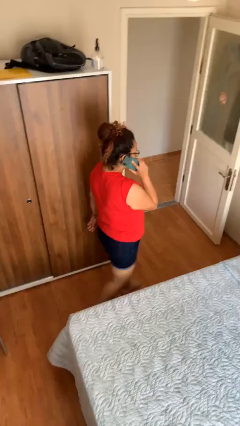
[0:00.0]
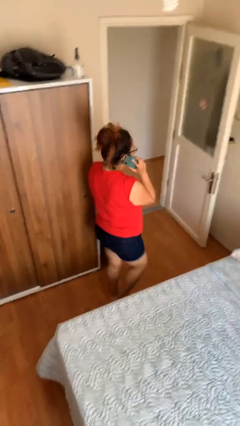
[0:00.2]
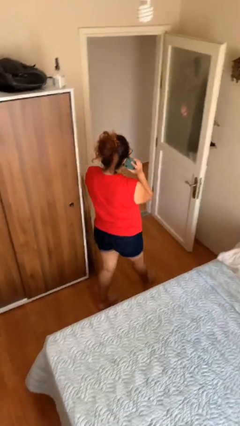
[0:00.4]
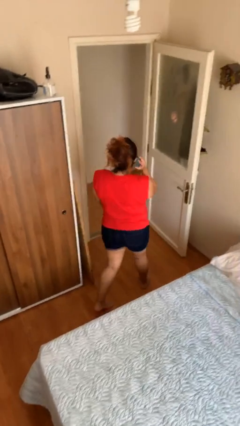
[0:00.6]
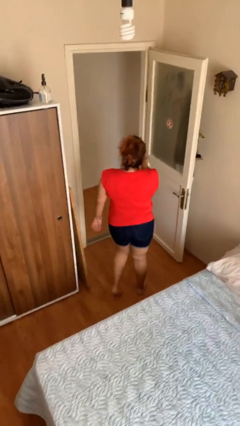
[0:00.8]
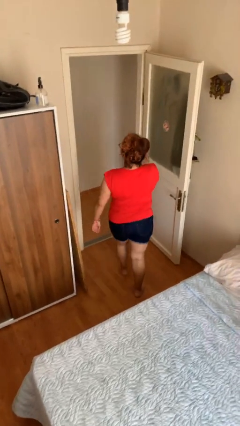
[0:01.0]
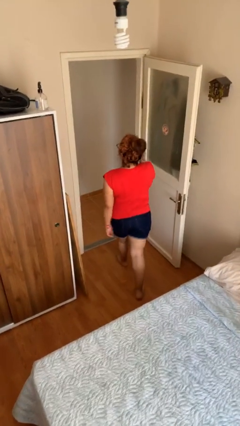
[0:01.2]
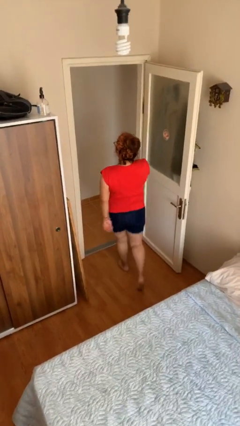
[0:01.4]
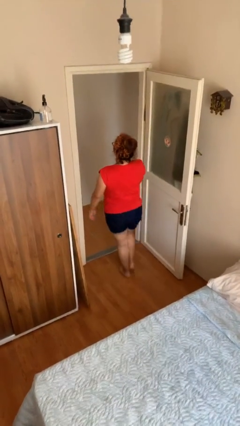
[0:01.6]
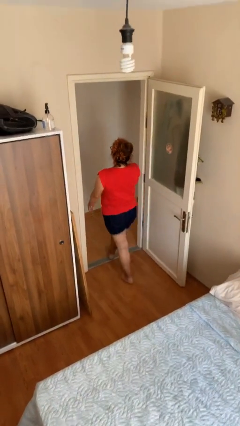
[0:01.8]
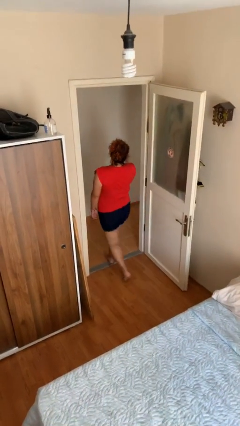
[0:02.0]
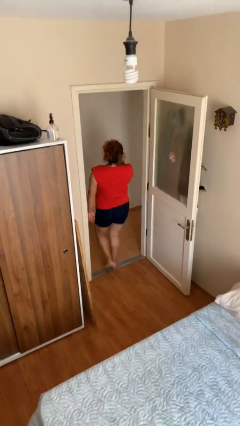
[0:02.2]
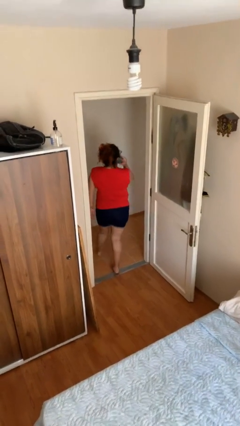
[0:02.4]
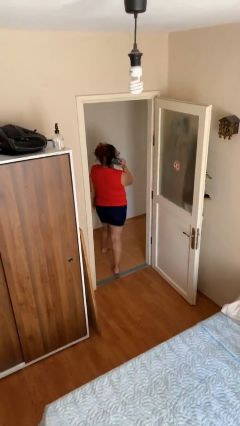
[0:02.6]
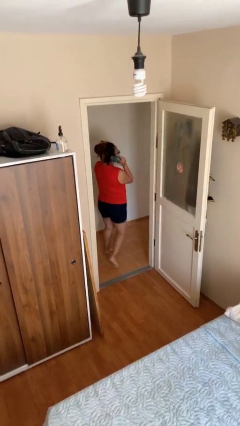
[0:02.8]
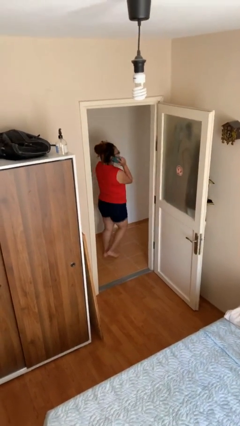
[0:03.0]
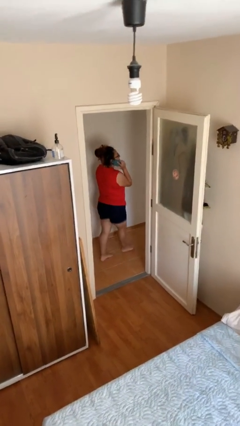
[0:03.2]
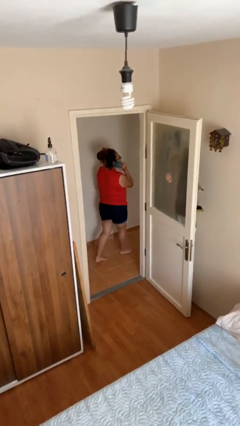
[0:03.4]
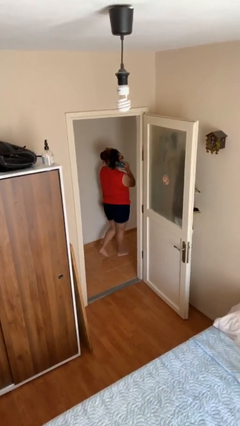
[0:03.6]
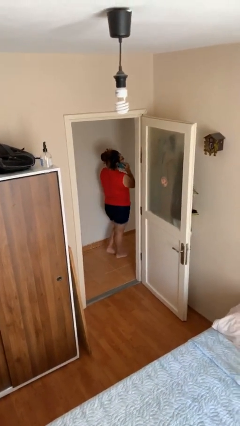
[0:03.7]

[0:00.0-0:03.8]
person exits scene through structure

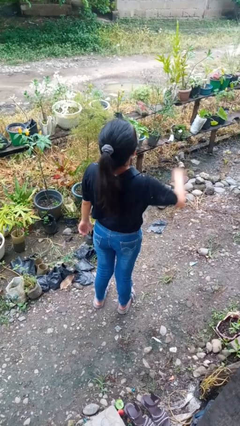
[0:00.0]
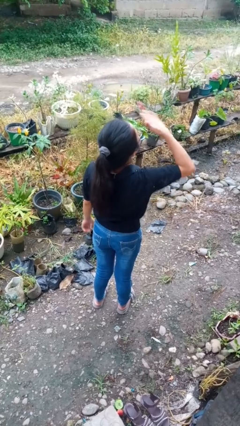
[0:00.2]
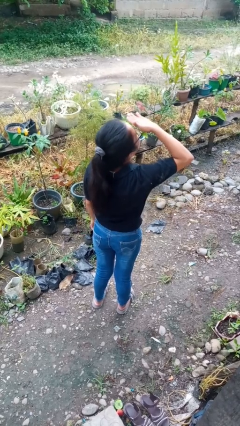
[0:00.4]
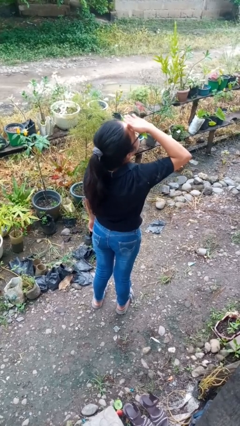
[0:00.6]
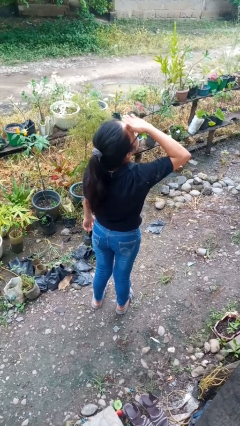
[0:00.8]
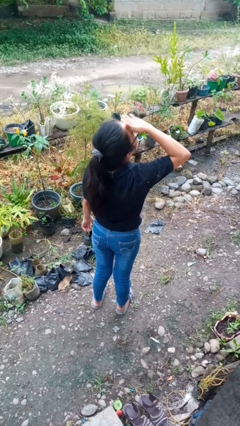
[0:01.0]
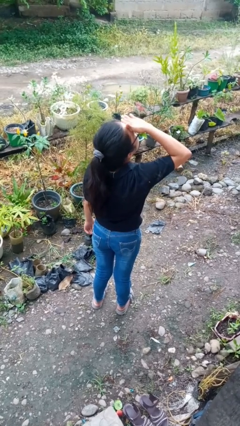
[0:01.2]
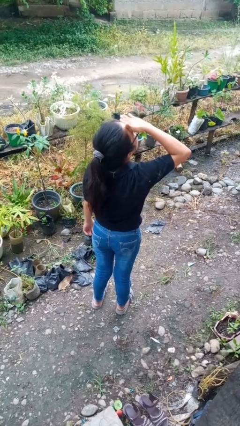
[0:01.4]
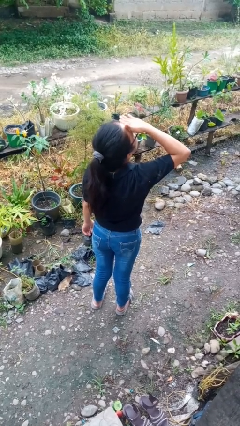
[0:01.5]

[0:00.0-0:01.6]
person shades eyes

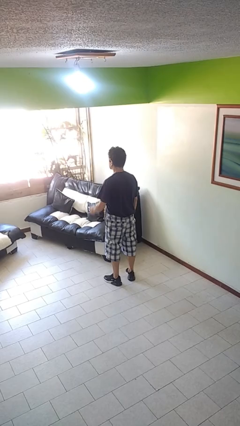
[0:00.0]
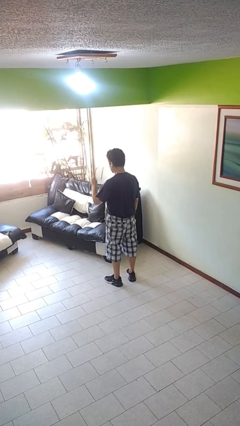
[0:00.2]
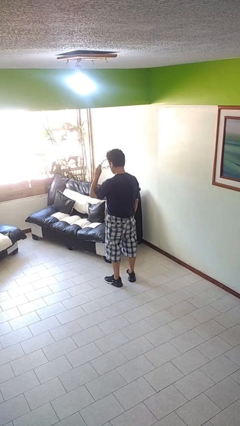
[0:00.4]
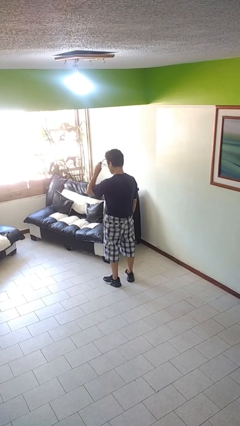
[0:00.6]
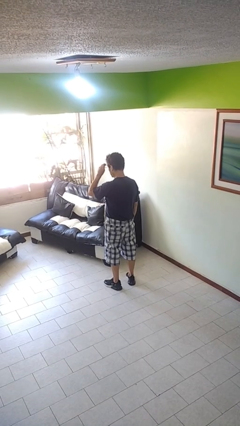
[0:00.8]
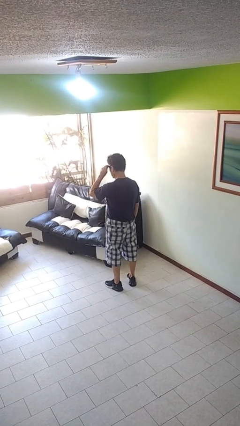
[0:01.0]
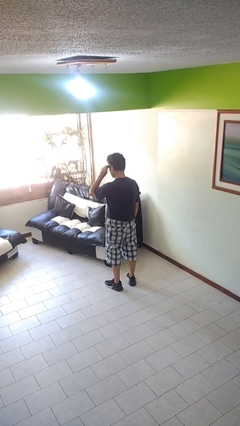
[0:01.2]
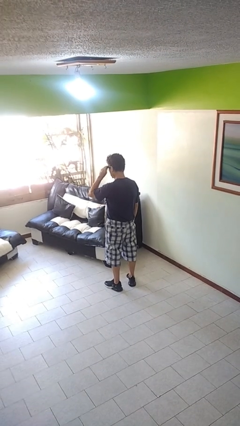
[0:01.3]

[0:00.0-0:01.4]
person puts on glasses

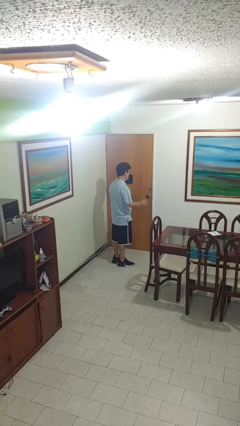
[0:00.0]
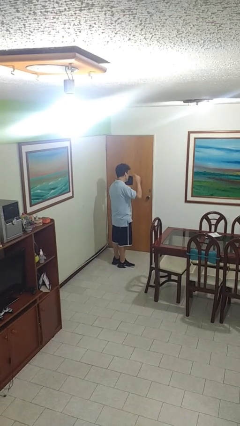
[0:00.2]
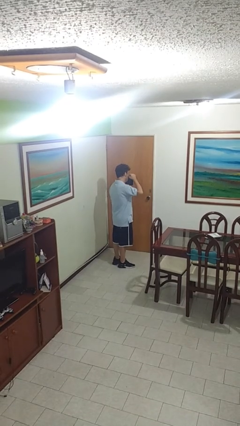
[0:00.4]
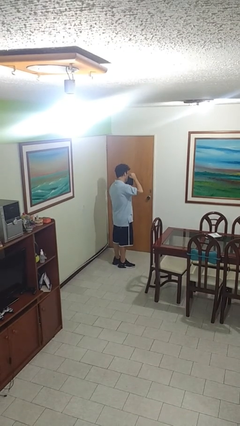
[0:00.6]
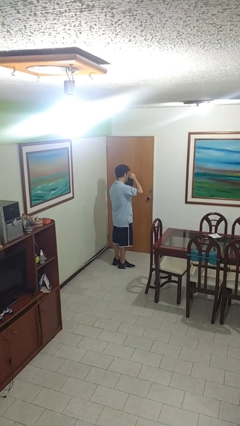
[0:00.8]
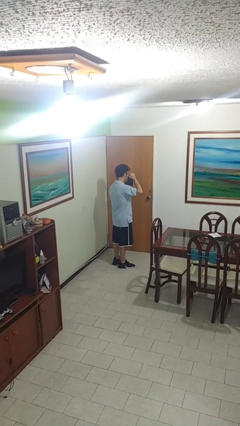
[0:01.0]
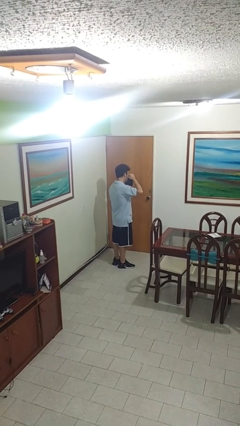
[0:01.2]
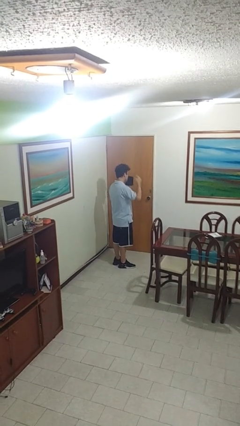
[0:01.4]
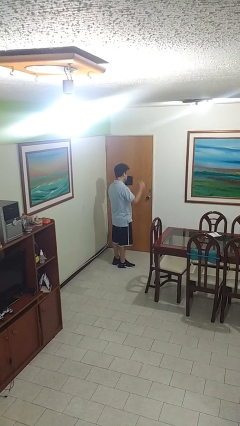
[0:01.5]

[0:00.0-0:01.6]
person gestures listen closely

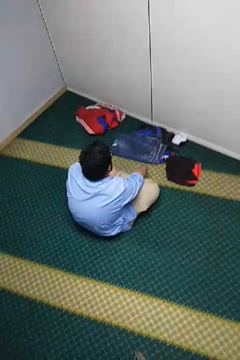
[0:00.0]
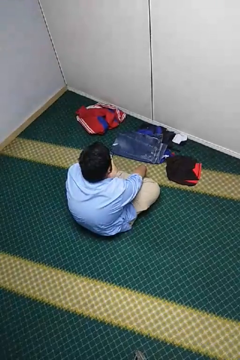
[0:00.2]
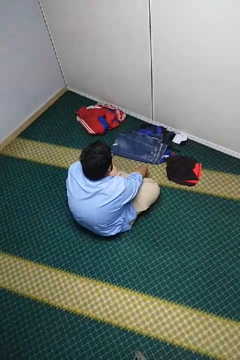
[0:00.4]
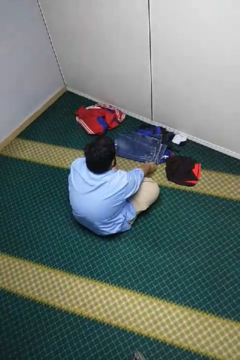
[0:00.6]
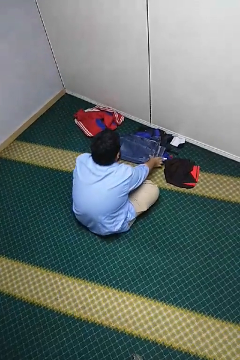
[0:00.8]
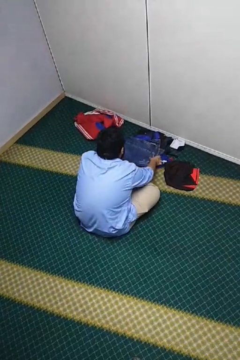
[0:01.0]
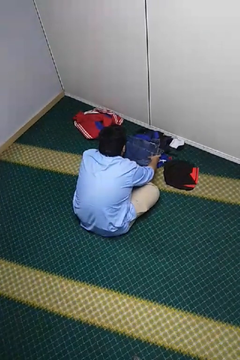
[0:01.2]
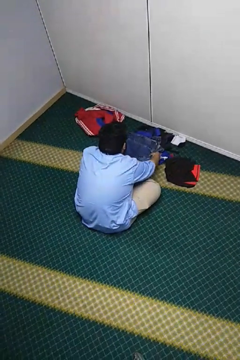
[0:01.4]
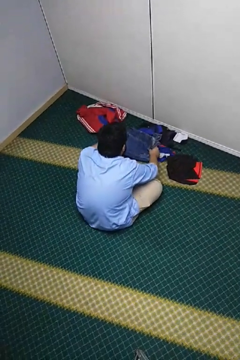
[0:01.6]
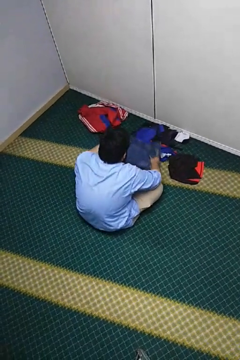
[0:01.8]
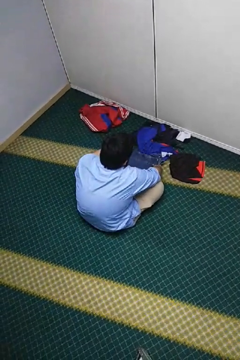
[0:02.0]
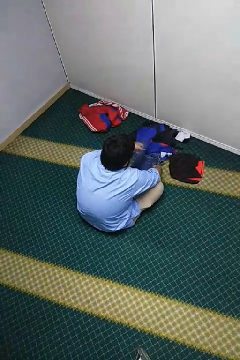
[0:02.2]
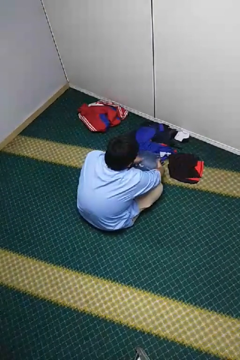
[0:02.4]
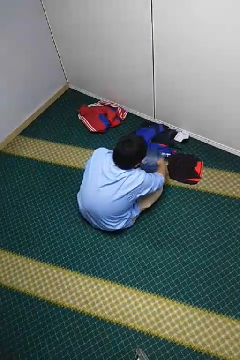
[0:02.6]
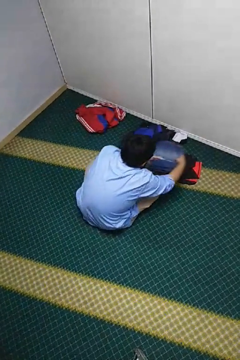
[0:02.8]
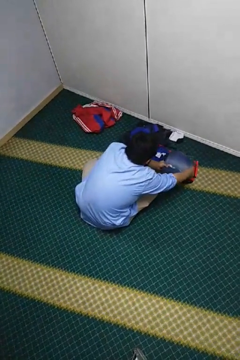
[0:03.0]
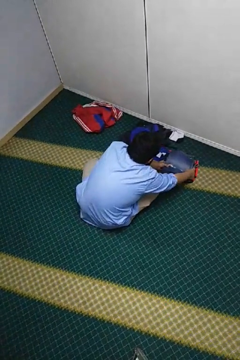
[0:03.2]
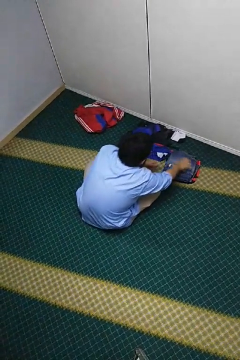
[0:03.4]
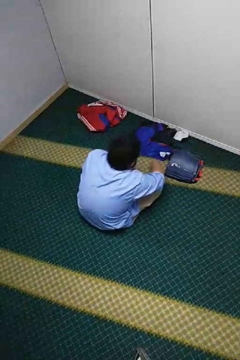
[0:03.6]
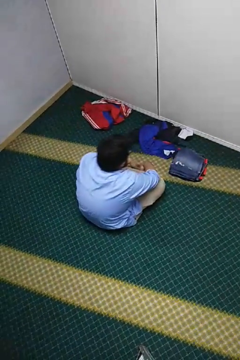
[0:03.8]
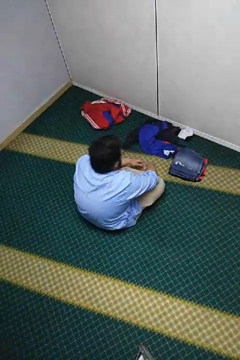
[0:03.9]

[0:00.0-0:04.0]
person folds pants

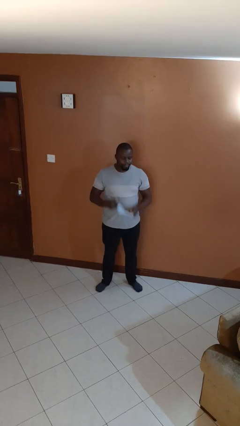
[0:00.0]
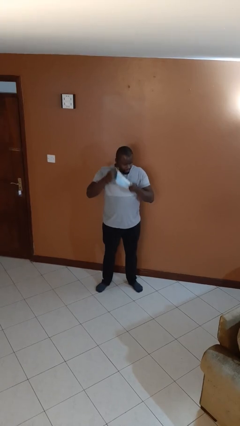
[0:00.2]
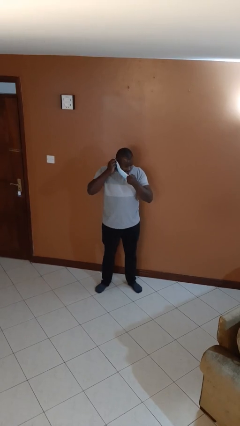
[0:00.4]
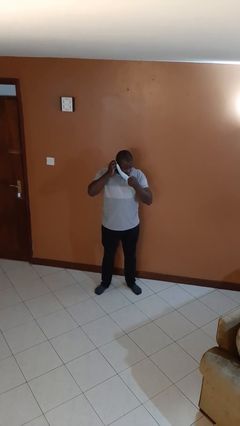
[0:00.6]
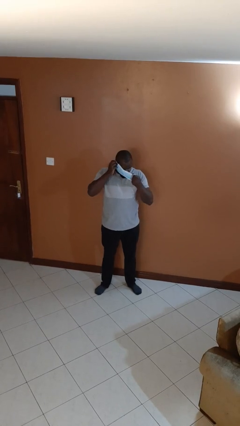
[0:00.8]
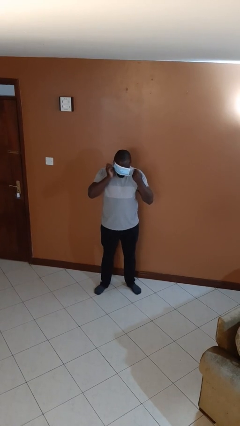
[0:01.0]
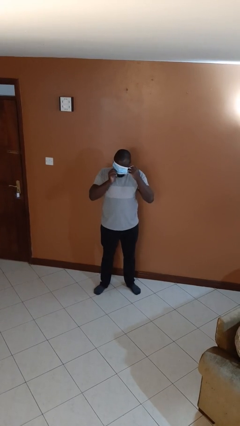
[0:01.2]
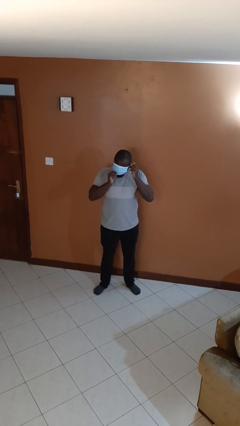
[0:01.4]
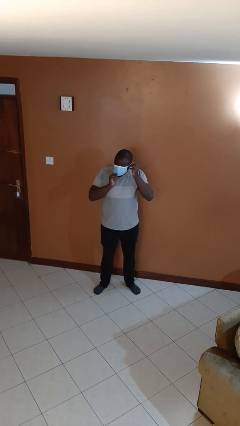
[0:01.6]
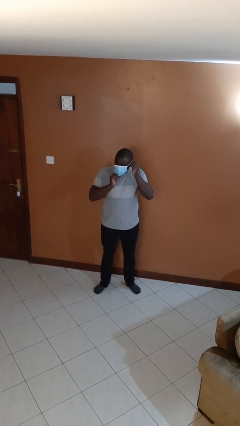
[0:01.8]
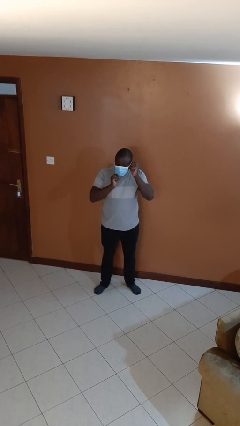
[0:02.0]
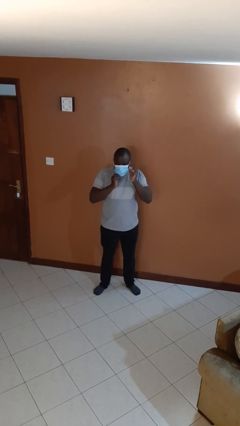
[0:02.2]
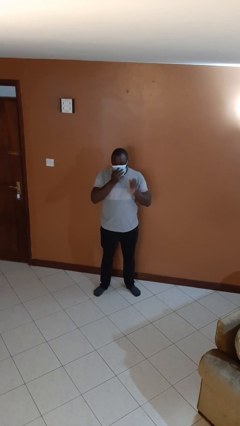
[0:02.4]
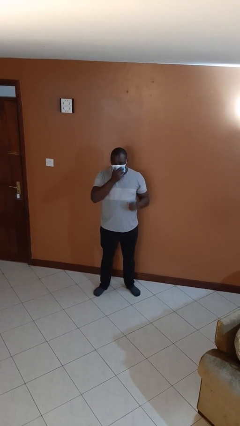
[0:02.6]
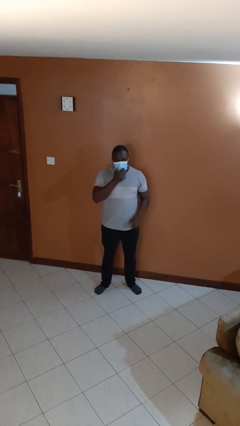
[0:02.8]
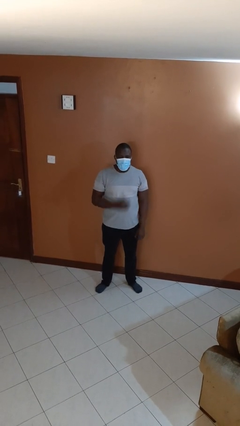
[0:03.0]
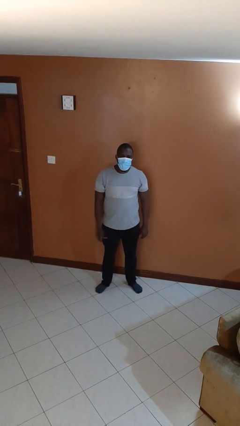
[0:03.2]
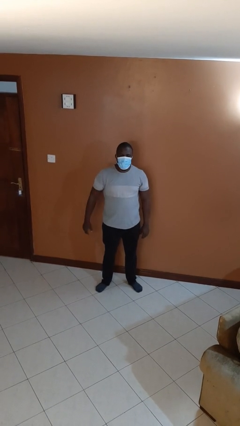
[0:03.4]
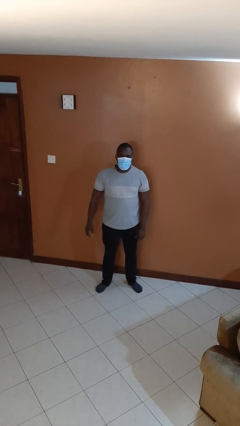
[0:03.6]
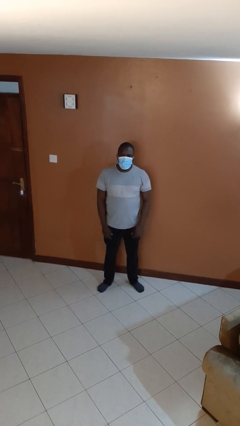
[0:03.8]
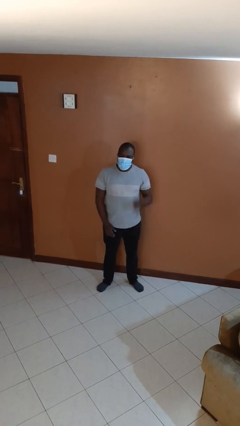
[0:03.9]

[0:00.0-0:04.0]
person puts on facemask

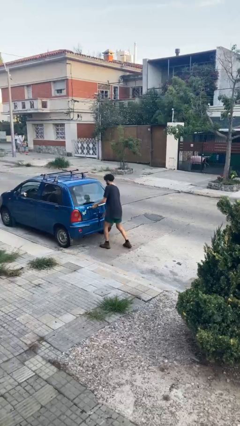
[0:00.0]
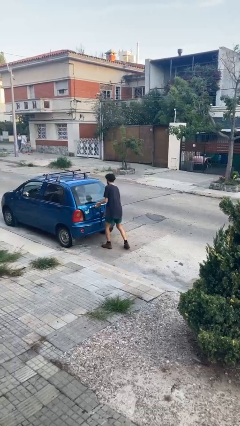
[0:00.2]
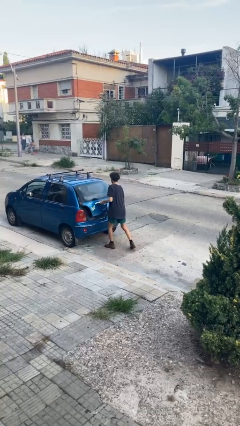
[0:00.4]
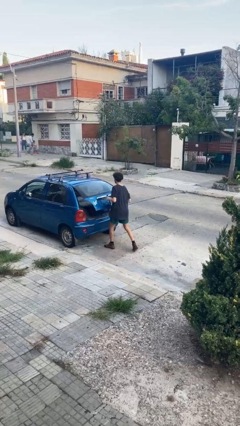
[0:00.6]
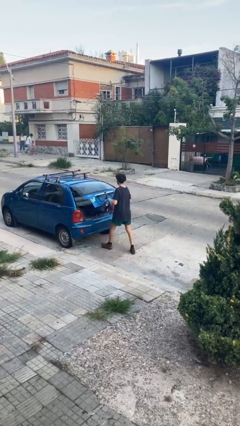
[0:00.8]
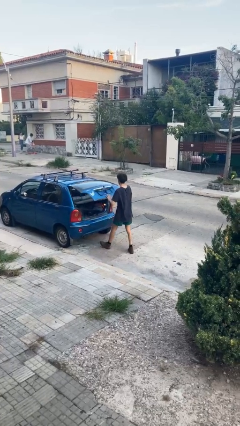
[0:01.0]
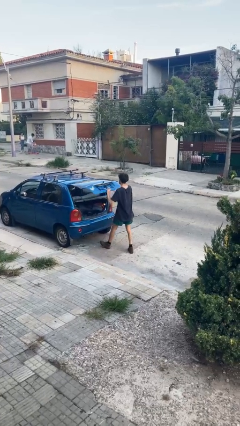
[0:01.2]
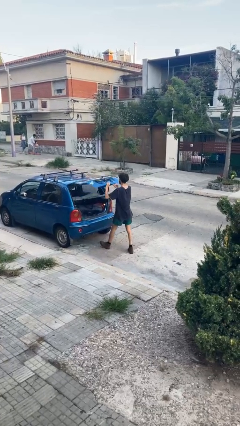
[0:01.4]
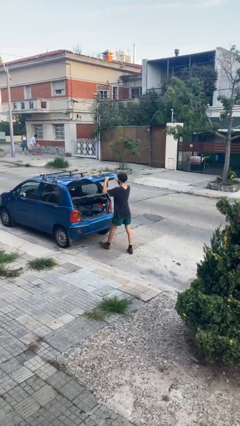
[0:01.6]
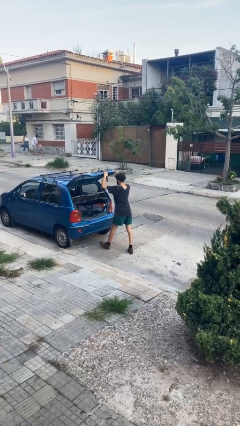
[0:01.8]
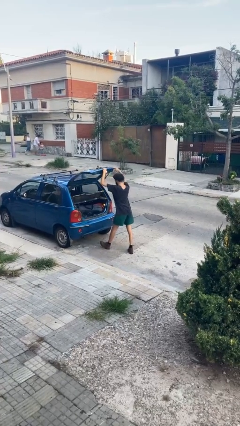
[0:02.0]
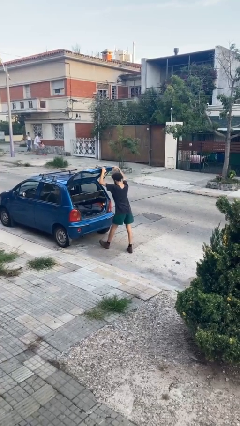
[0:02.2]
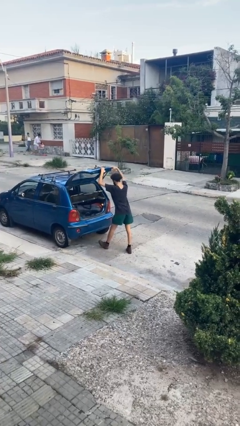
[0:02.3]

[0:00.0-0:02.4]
person opens car trunk
